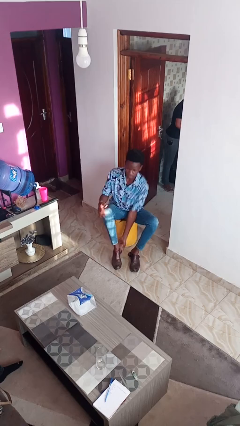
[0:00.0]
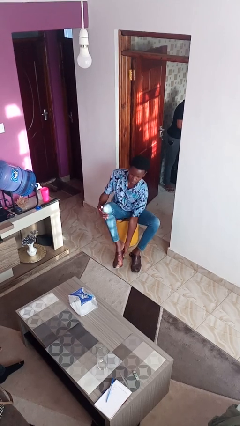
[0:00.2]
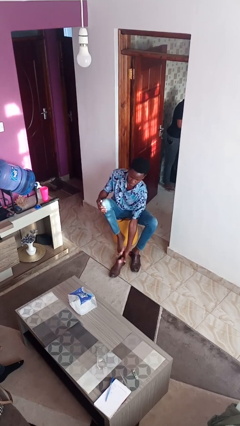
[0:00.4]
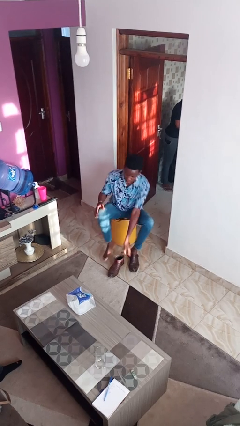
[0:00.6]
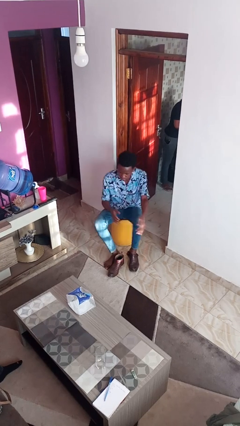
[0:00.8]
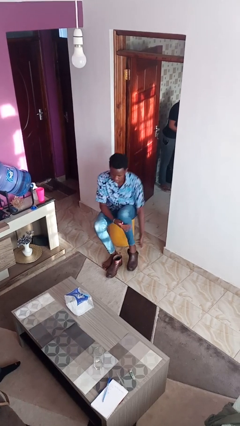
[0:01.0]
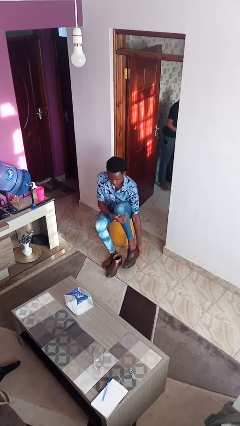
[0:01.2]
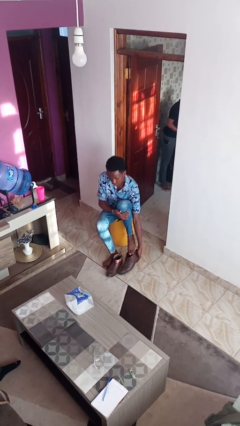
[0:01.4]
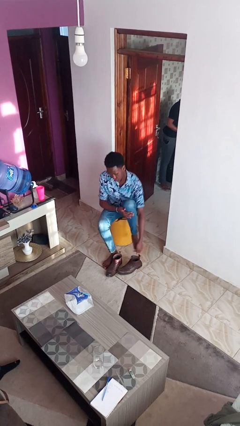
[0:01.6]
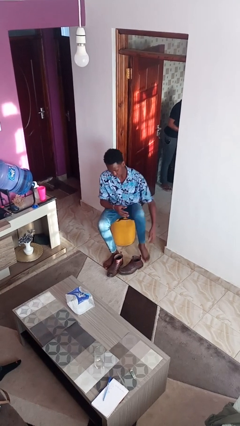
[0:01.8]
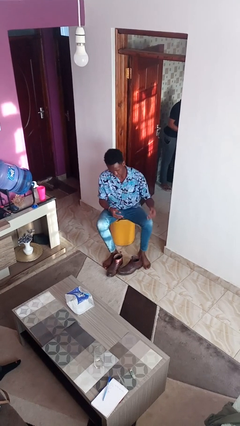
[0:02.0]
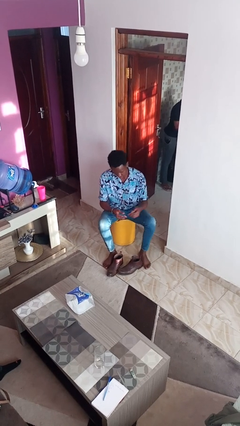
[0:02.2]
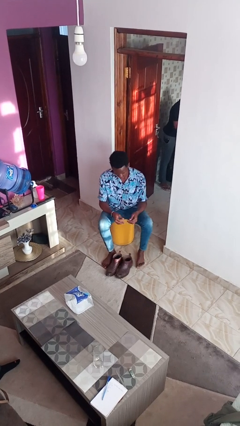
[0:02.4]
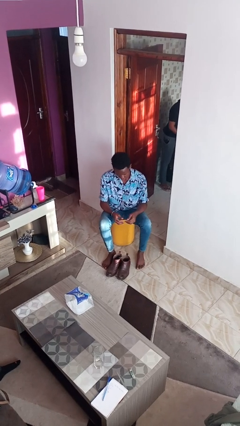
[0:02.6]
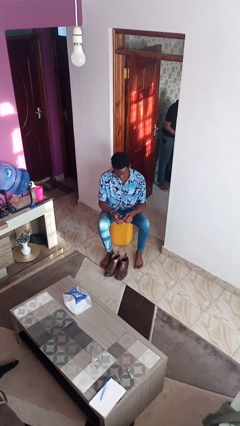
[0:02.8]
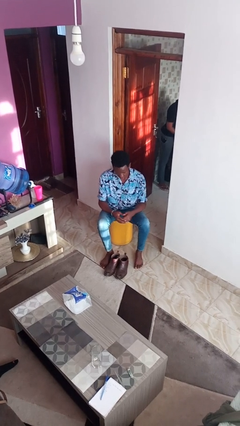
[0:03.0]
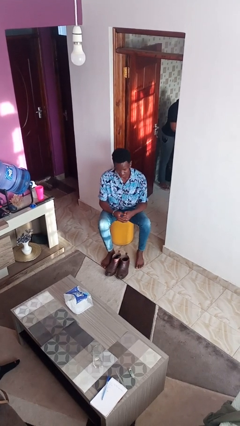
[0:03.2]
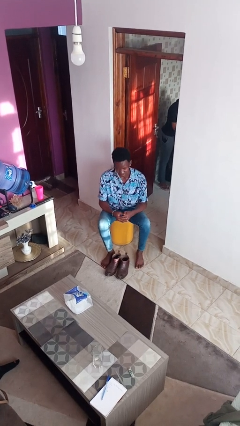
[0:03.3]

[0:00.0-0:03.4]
person takes off boots

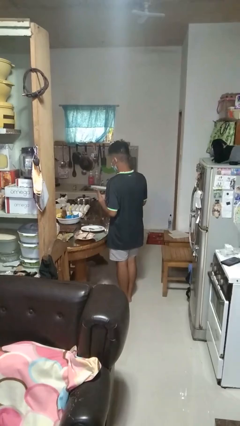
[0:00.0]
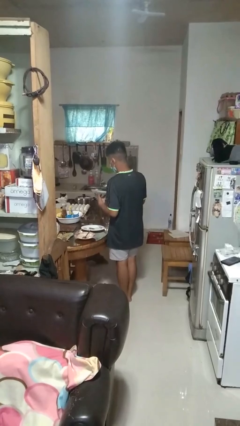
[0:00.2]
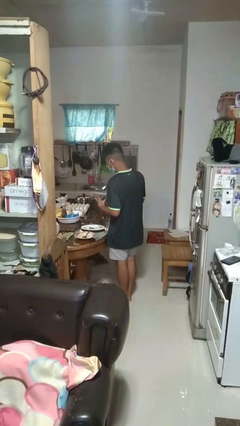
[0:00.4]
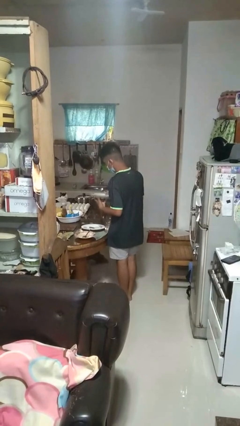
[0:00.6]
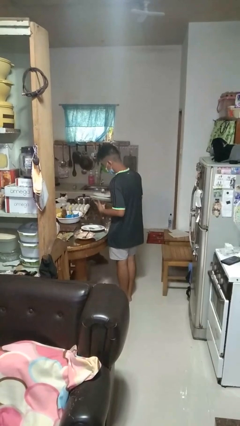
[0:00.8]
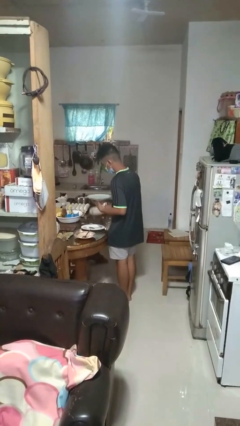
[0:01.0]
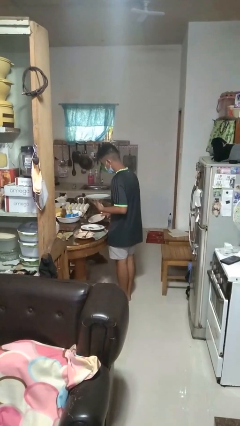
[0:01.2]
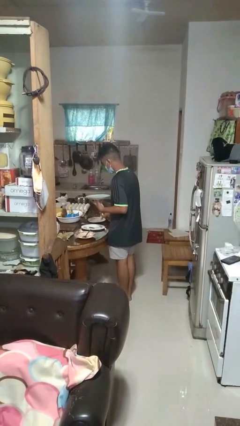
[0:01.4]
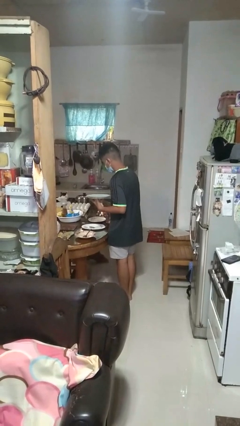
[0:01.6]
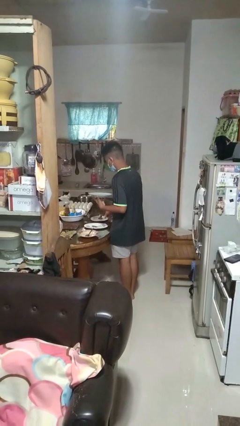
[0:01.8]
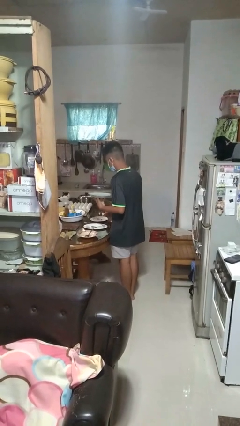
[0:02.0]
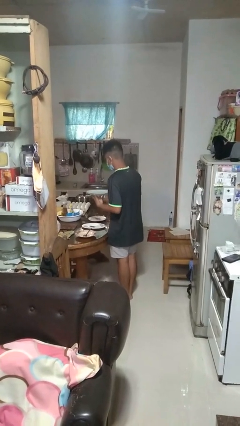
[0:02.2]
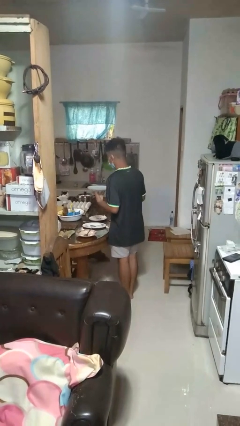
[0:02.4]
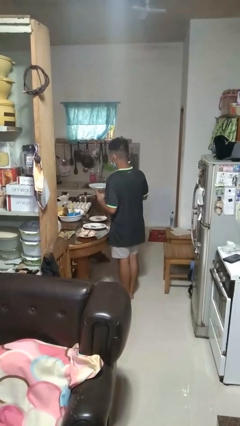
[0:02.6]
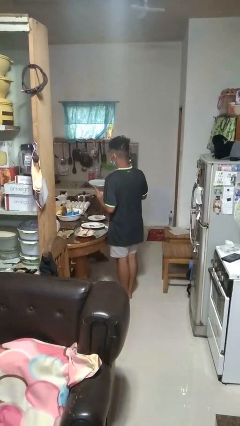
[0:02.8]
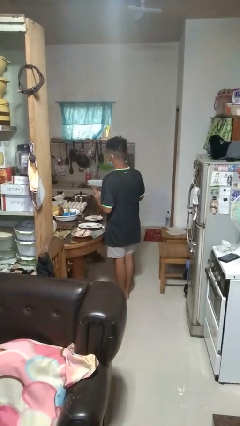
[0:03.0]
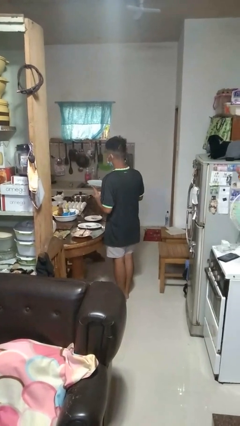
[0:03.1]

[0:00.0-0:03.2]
person sets table

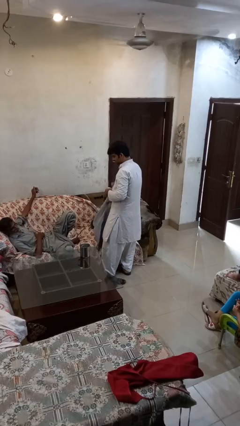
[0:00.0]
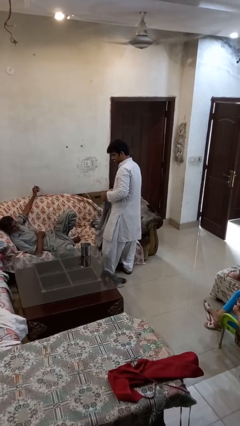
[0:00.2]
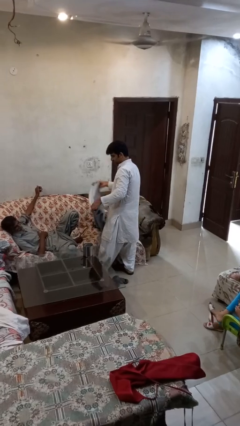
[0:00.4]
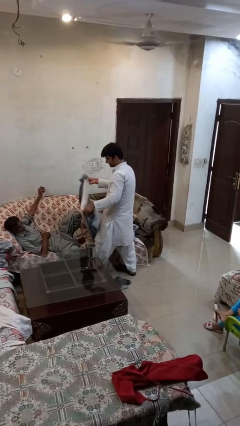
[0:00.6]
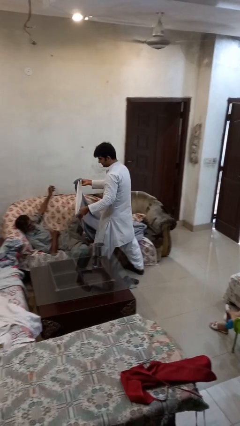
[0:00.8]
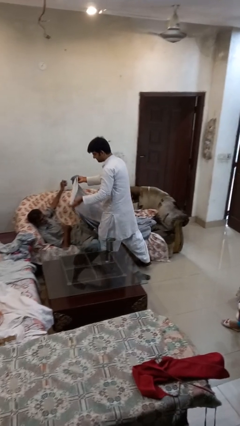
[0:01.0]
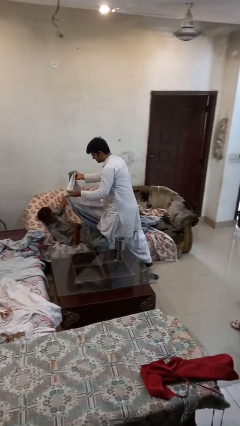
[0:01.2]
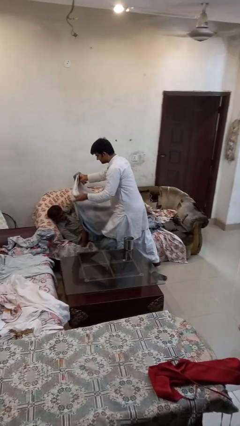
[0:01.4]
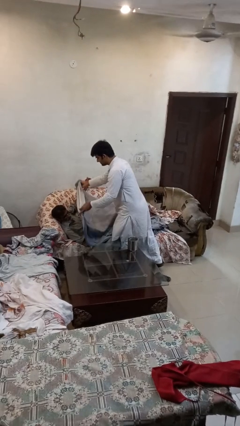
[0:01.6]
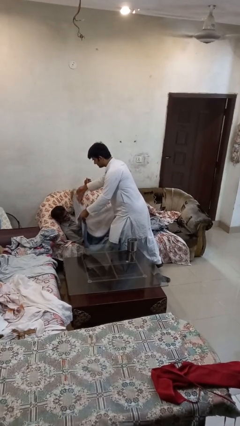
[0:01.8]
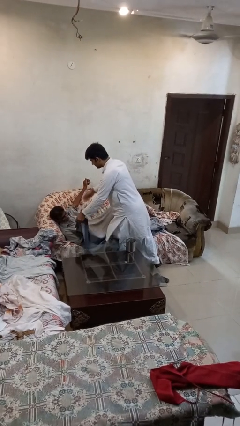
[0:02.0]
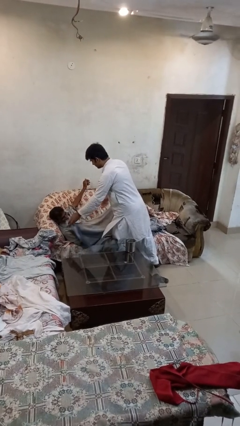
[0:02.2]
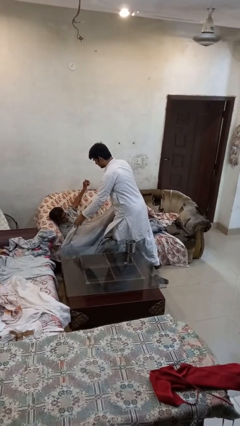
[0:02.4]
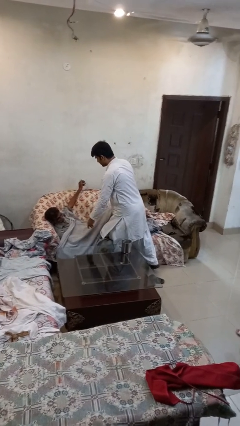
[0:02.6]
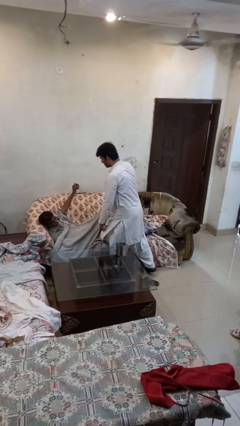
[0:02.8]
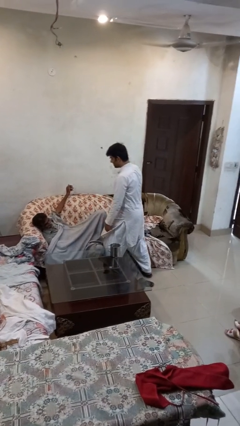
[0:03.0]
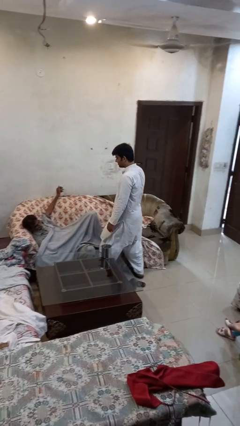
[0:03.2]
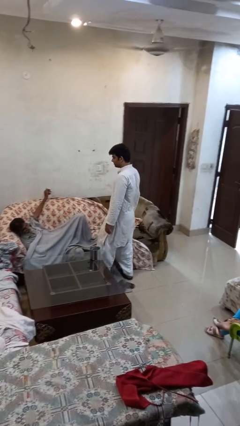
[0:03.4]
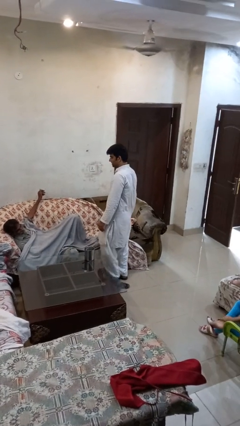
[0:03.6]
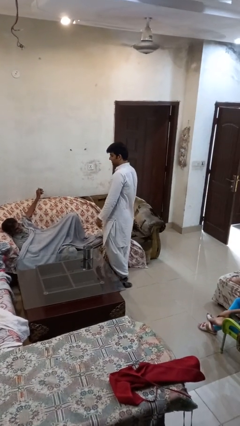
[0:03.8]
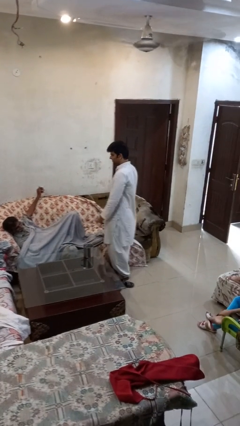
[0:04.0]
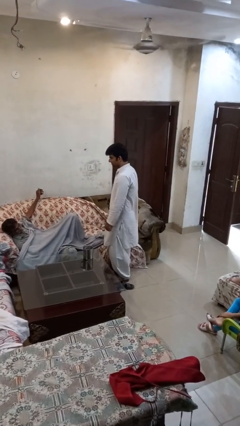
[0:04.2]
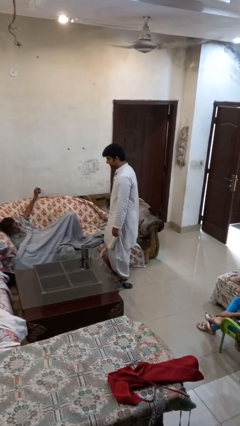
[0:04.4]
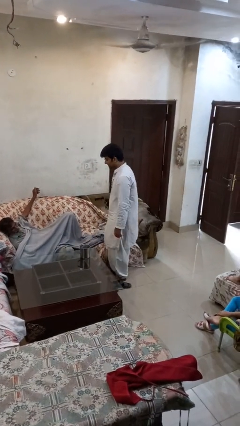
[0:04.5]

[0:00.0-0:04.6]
person covers friend with blanket

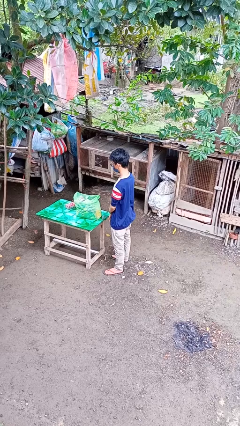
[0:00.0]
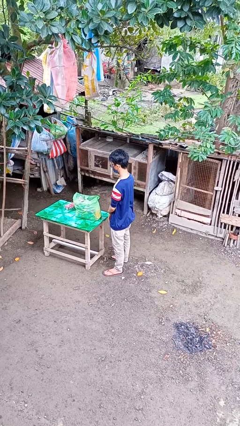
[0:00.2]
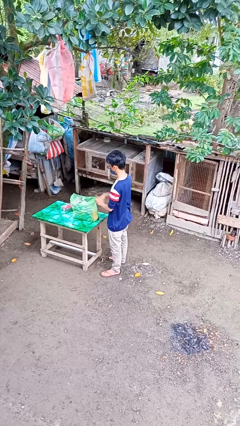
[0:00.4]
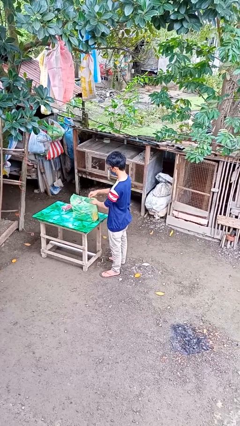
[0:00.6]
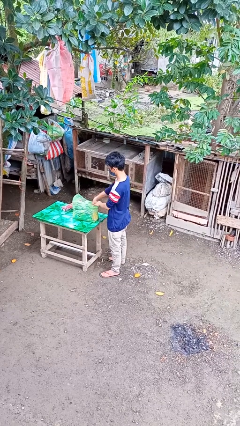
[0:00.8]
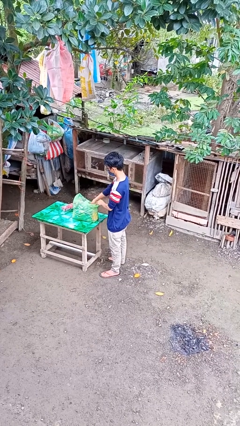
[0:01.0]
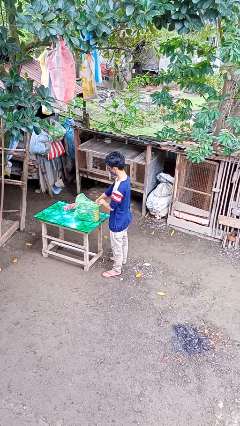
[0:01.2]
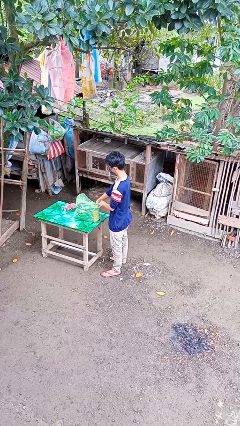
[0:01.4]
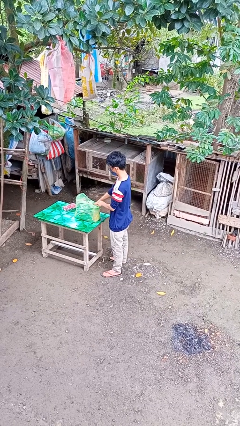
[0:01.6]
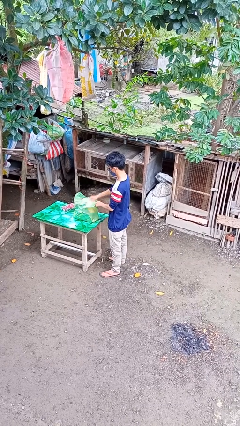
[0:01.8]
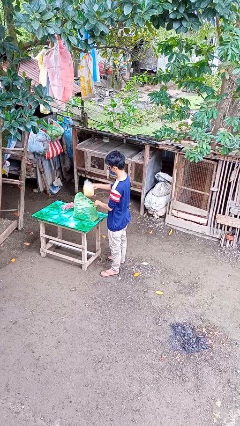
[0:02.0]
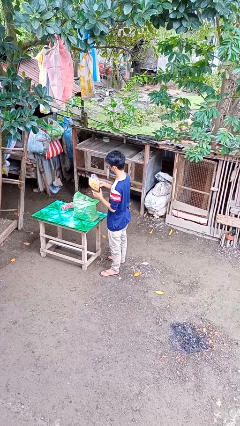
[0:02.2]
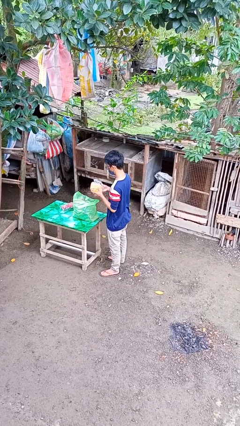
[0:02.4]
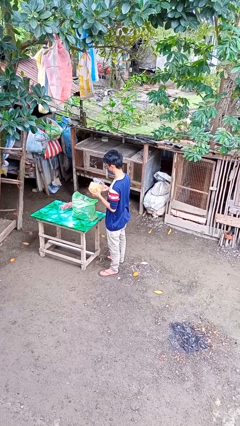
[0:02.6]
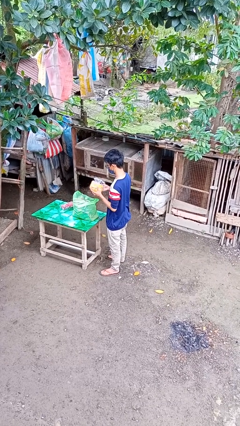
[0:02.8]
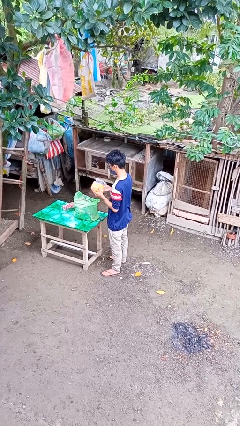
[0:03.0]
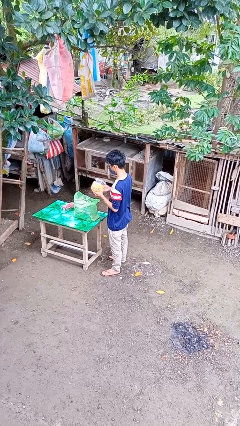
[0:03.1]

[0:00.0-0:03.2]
person takes object from bag

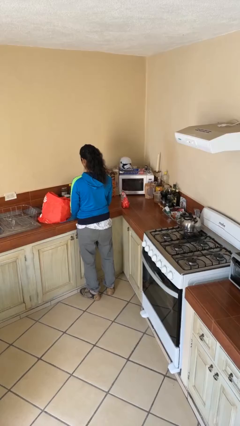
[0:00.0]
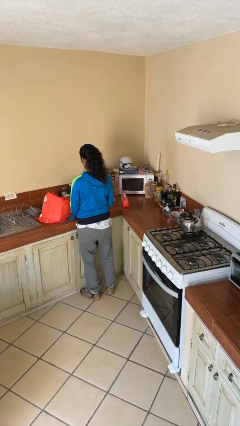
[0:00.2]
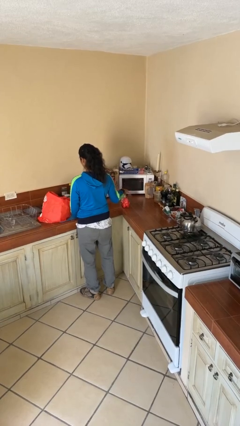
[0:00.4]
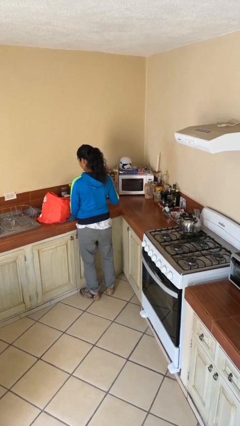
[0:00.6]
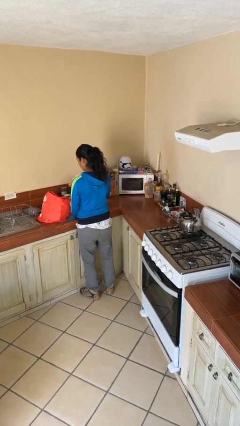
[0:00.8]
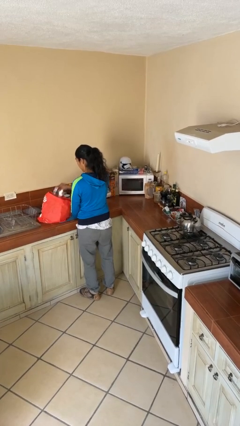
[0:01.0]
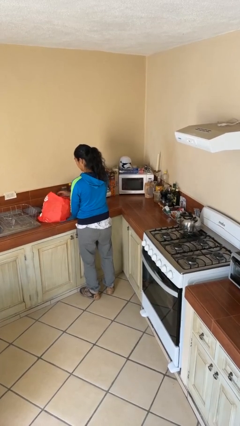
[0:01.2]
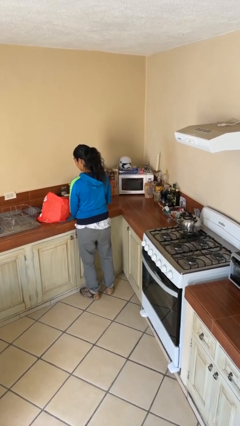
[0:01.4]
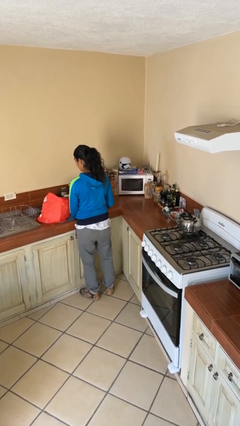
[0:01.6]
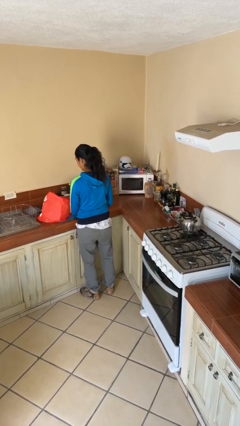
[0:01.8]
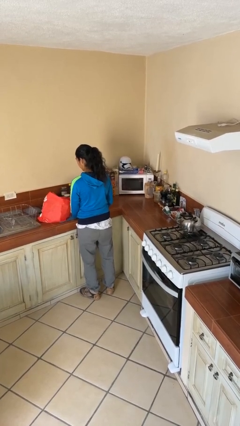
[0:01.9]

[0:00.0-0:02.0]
person puts object into bag

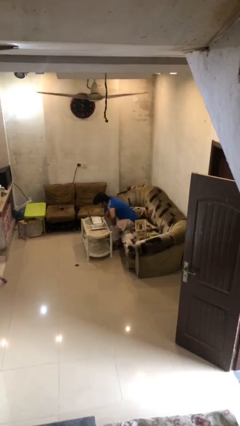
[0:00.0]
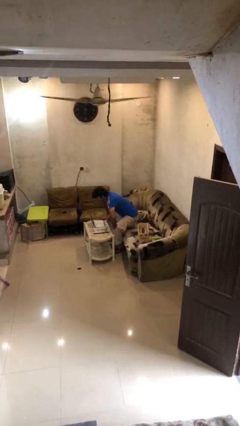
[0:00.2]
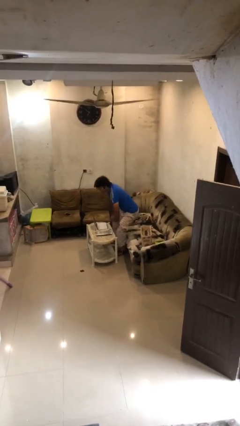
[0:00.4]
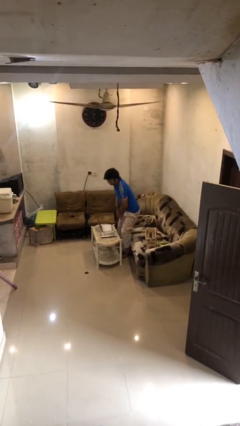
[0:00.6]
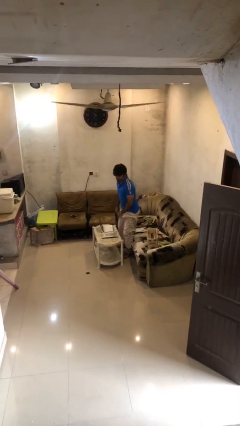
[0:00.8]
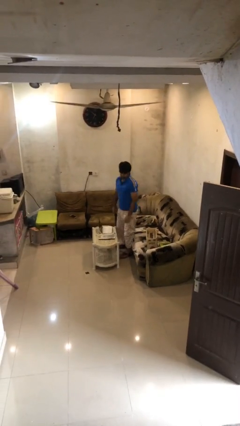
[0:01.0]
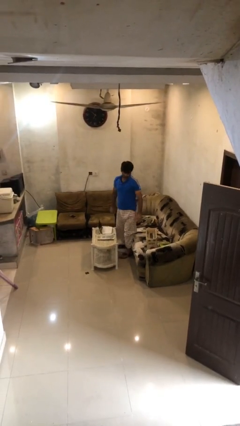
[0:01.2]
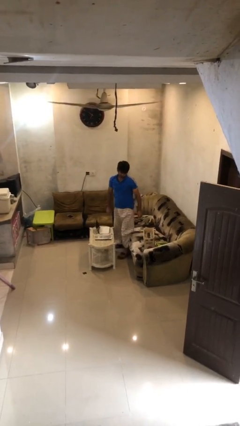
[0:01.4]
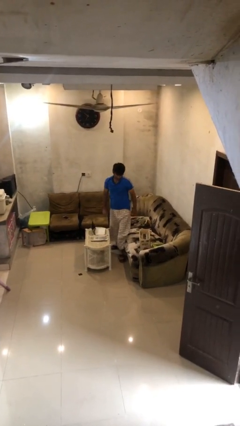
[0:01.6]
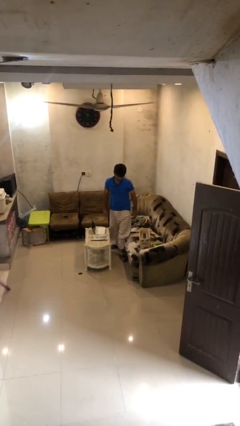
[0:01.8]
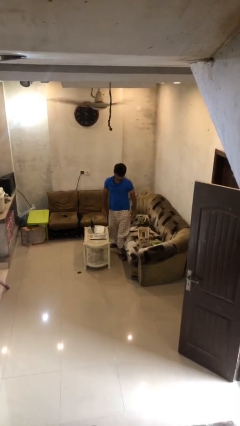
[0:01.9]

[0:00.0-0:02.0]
person stands up
